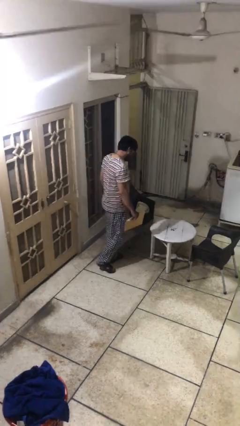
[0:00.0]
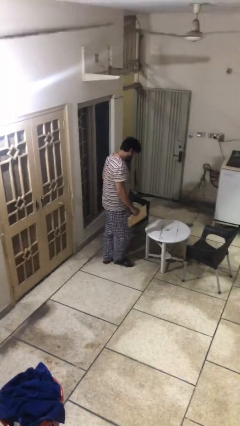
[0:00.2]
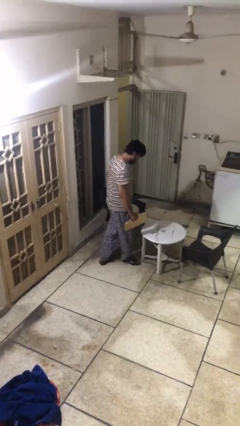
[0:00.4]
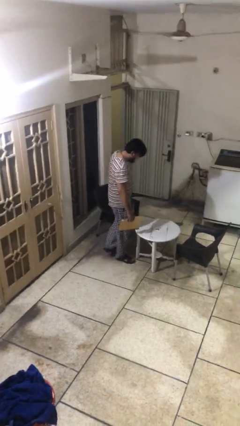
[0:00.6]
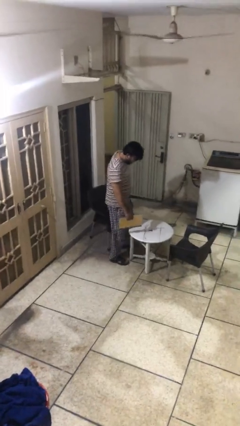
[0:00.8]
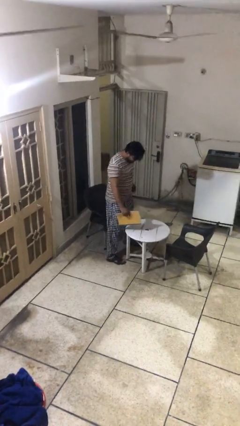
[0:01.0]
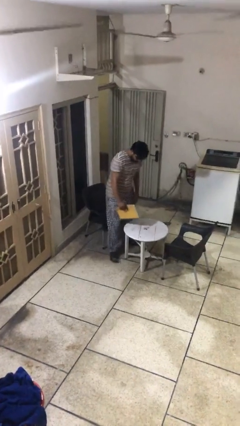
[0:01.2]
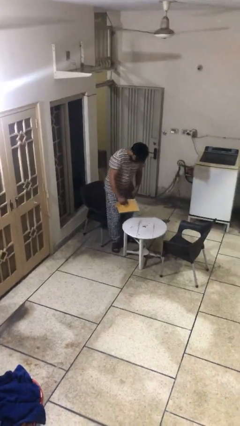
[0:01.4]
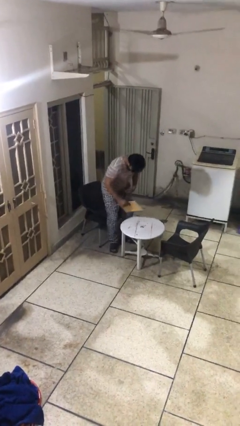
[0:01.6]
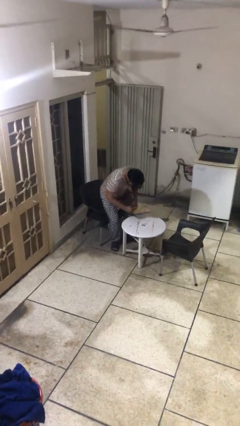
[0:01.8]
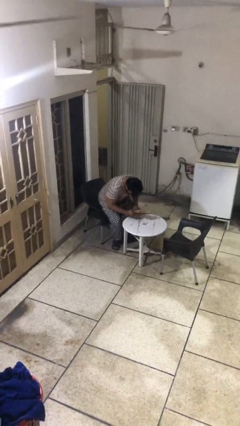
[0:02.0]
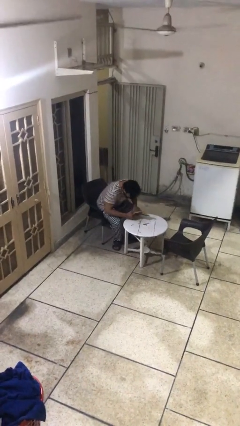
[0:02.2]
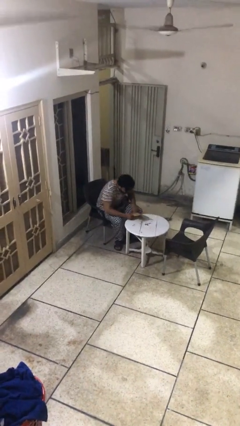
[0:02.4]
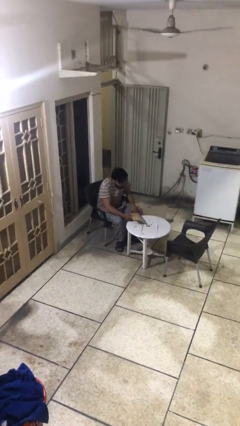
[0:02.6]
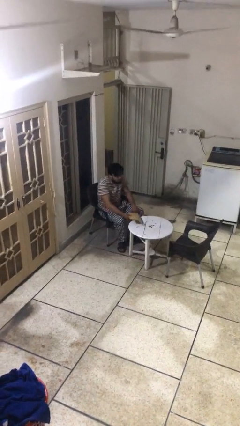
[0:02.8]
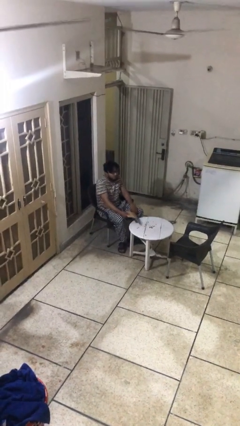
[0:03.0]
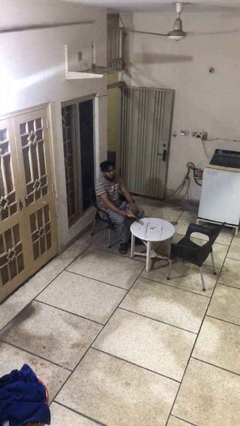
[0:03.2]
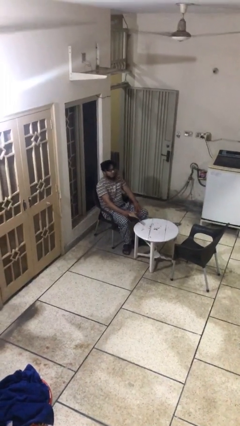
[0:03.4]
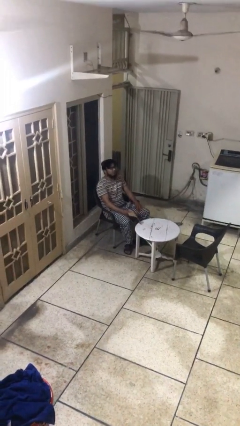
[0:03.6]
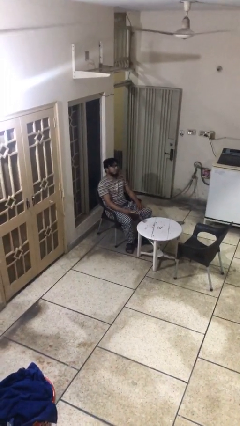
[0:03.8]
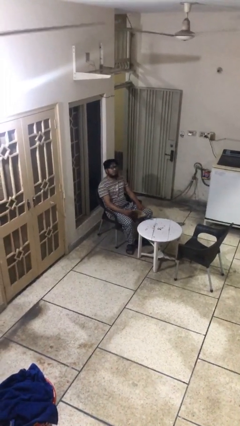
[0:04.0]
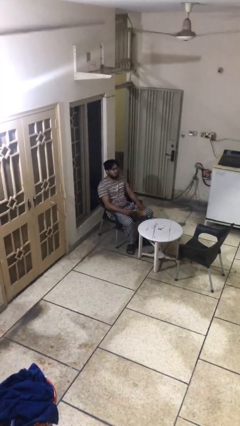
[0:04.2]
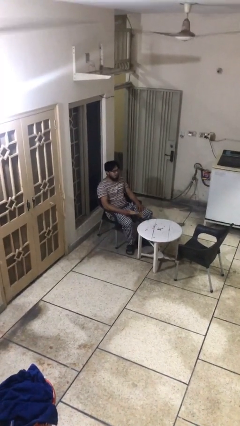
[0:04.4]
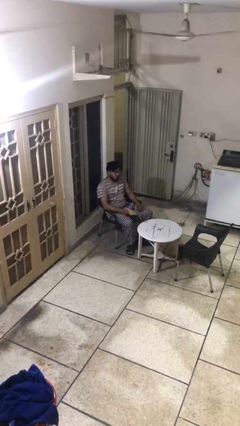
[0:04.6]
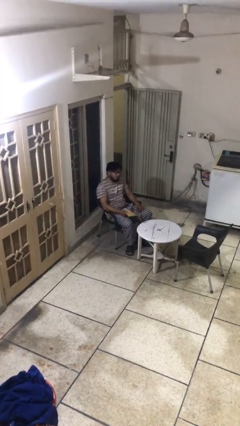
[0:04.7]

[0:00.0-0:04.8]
person sits down

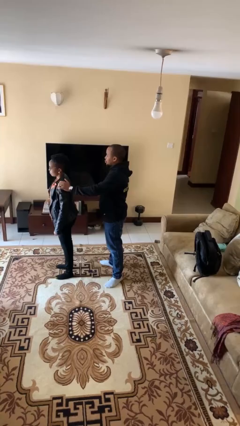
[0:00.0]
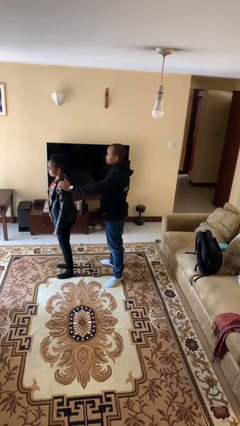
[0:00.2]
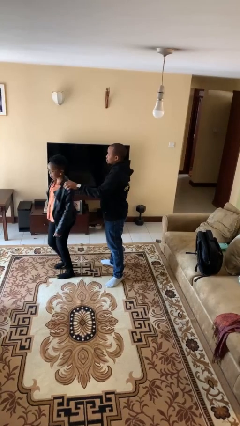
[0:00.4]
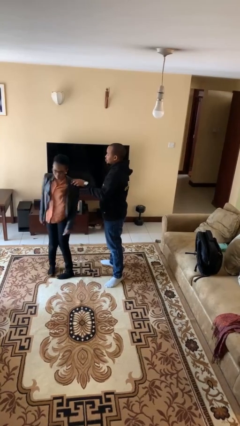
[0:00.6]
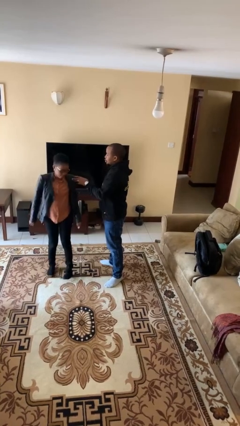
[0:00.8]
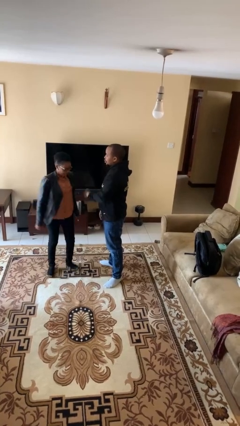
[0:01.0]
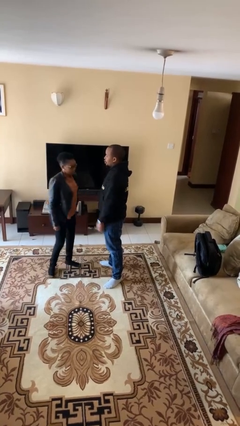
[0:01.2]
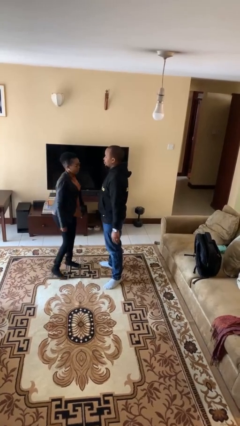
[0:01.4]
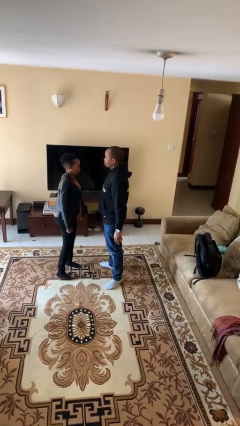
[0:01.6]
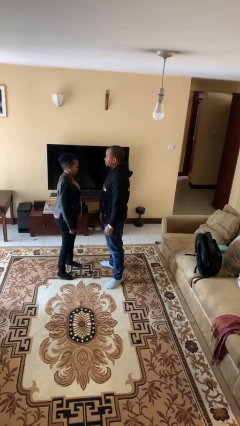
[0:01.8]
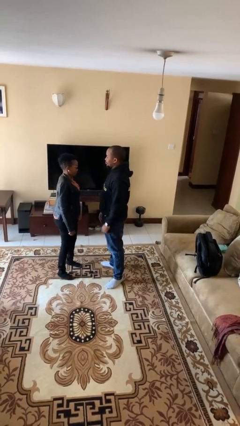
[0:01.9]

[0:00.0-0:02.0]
person spins person around

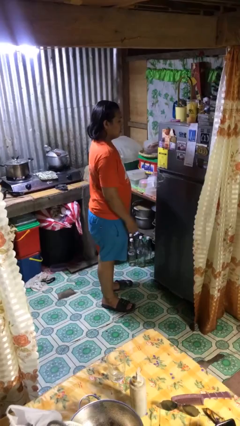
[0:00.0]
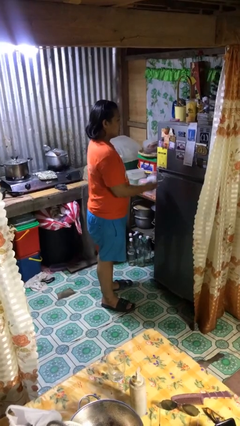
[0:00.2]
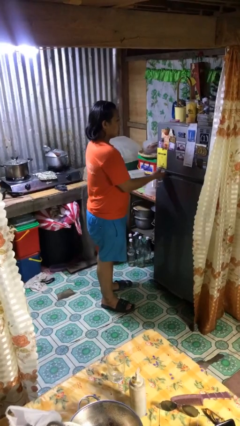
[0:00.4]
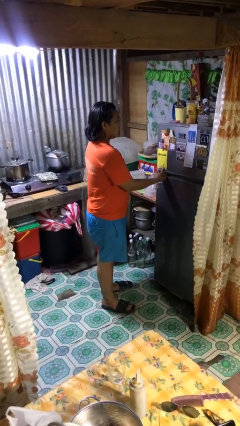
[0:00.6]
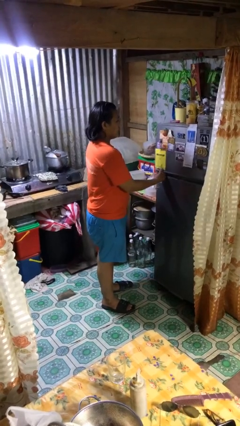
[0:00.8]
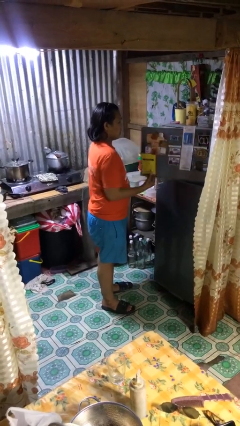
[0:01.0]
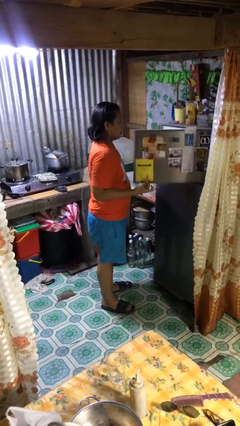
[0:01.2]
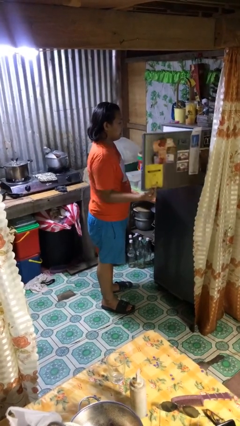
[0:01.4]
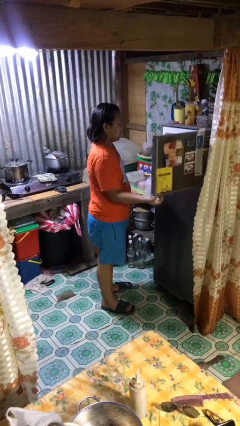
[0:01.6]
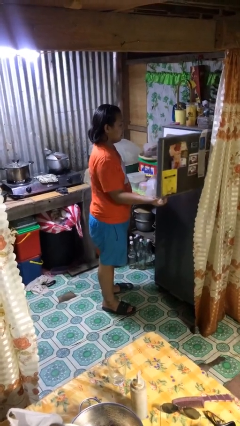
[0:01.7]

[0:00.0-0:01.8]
person opens refrigerator

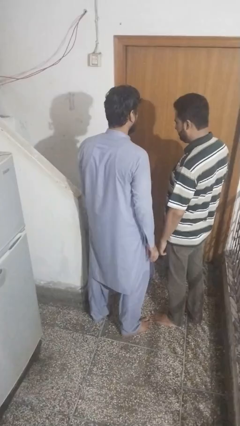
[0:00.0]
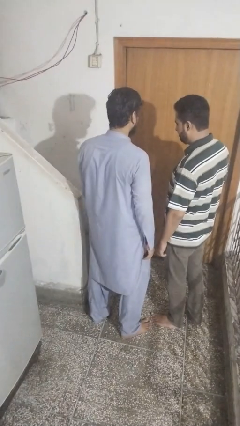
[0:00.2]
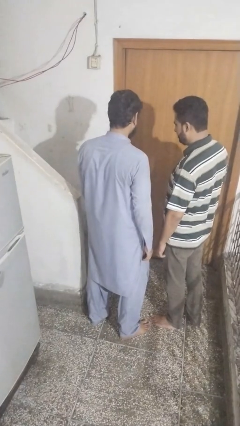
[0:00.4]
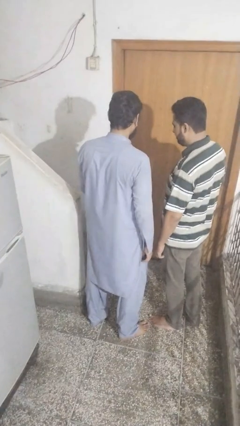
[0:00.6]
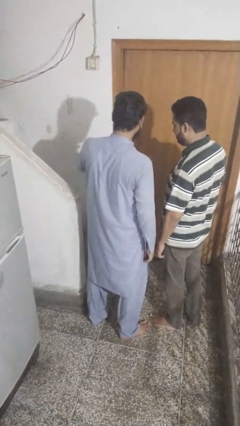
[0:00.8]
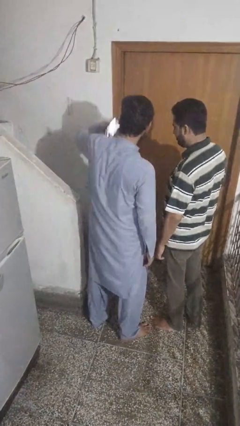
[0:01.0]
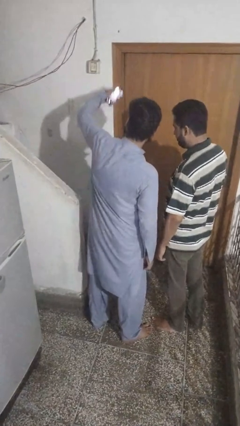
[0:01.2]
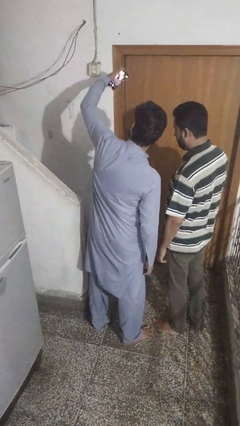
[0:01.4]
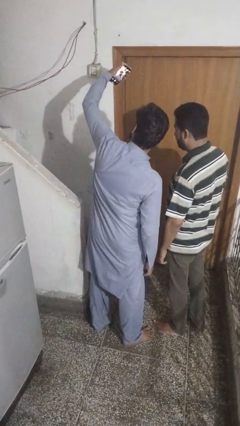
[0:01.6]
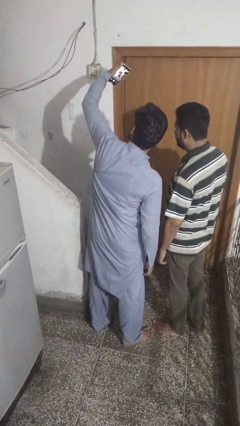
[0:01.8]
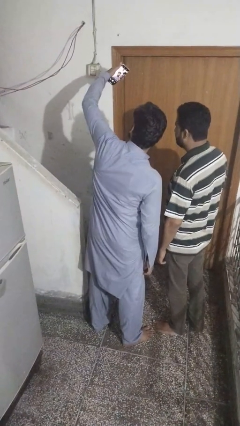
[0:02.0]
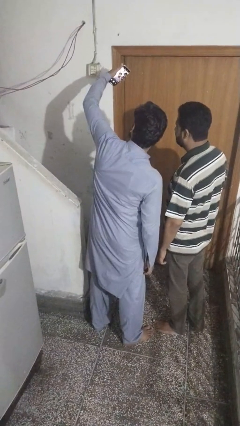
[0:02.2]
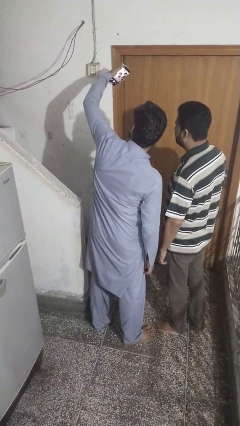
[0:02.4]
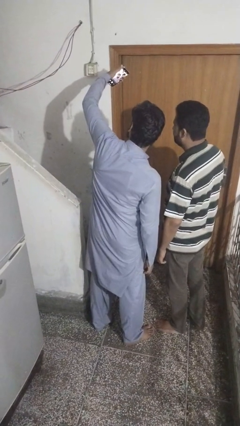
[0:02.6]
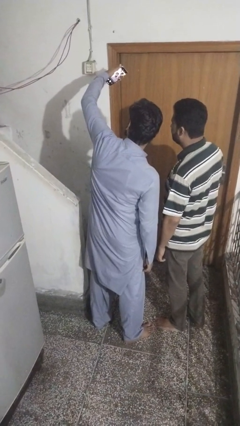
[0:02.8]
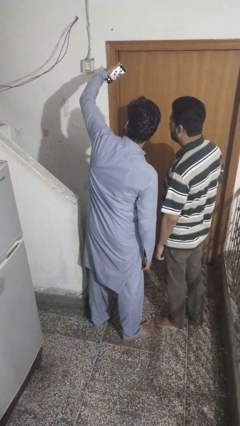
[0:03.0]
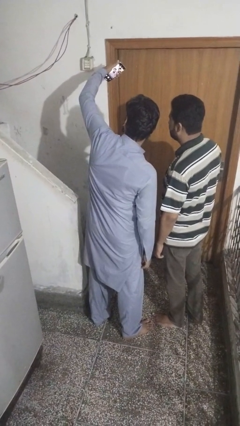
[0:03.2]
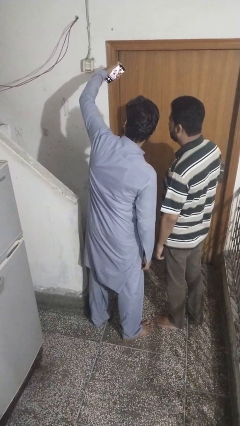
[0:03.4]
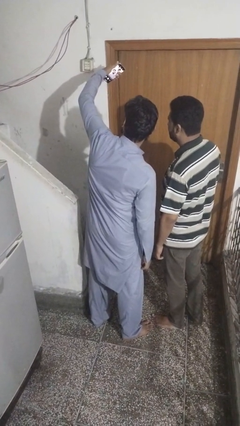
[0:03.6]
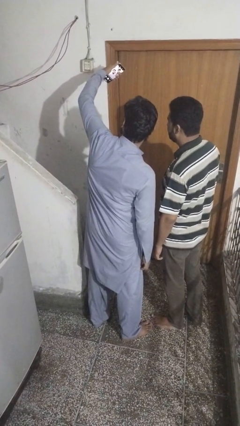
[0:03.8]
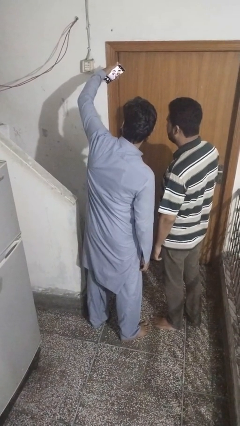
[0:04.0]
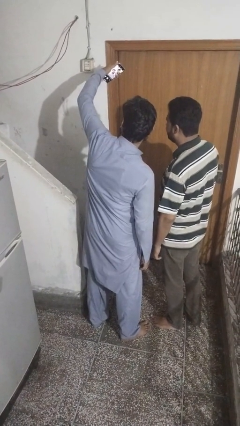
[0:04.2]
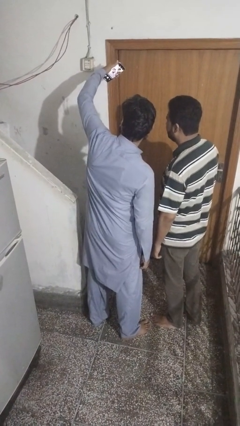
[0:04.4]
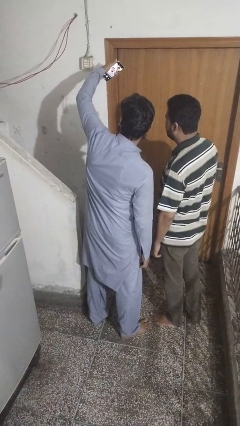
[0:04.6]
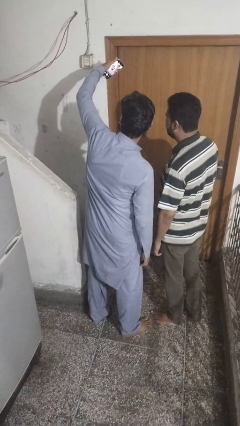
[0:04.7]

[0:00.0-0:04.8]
person takes selfie with person

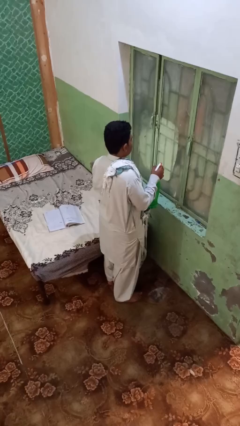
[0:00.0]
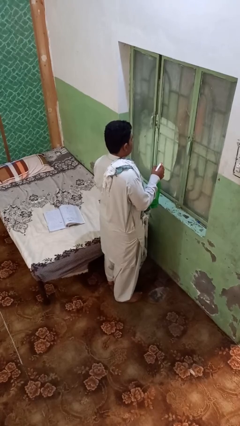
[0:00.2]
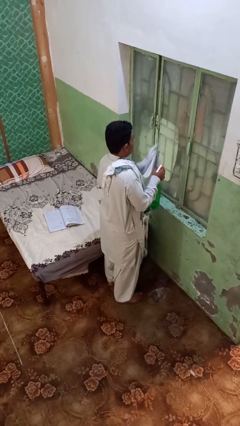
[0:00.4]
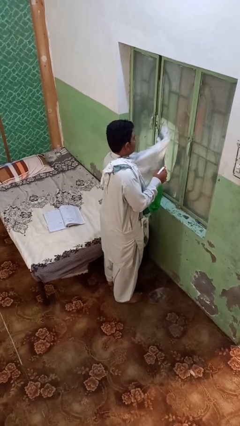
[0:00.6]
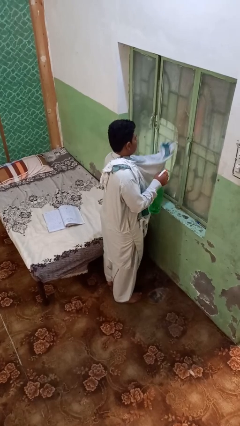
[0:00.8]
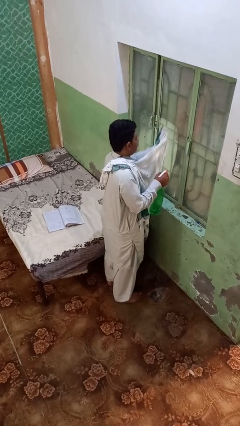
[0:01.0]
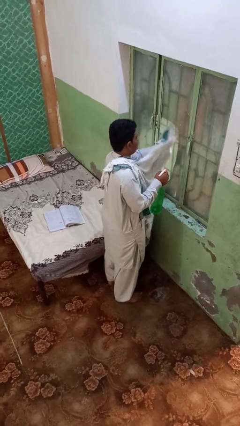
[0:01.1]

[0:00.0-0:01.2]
person washes window

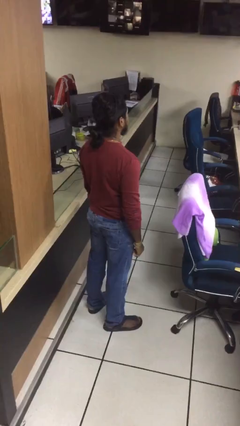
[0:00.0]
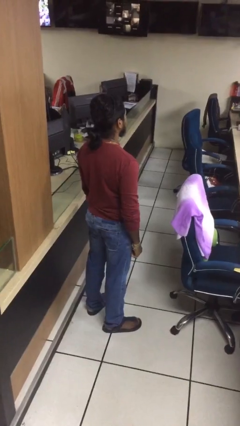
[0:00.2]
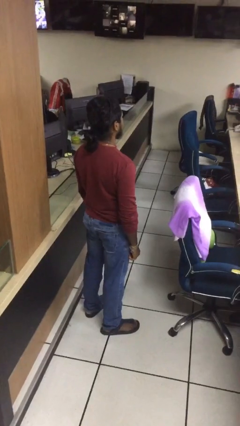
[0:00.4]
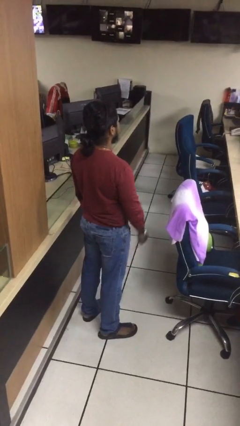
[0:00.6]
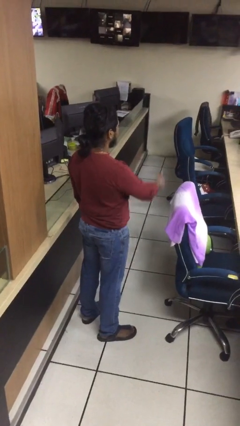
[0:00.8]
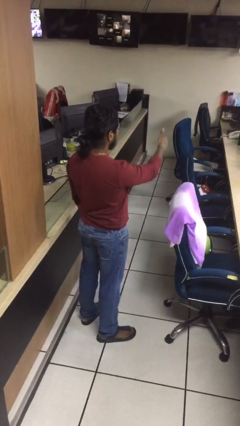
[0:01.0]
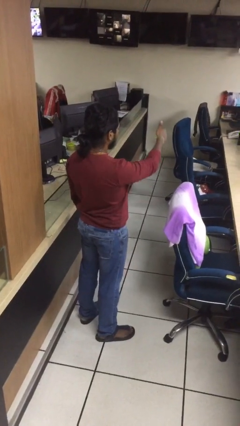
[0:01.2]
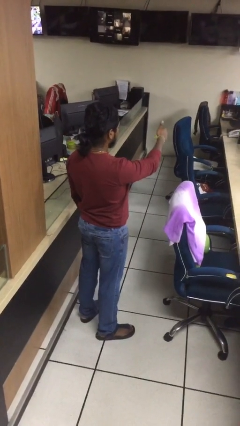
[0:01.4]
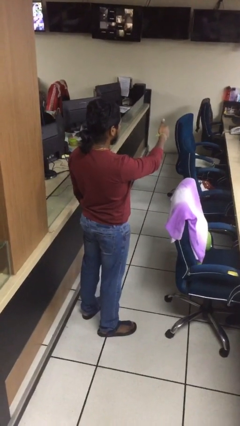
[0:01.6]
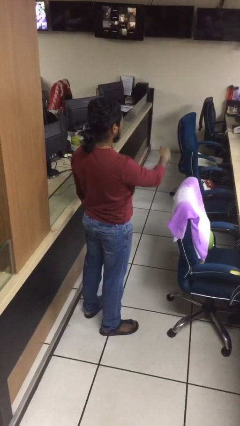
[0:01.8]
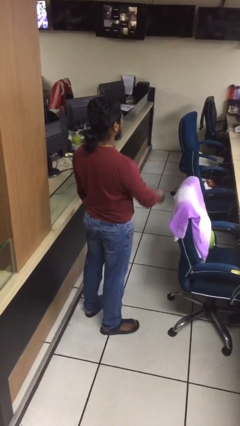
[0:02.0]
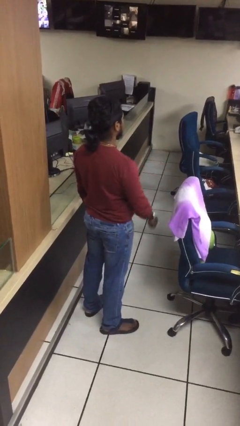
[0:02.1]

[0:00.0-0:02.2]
person gestures thumbs up

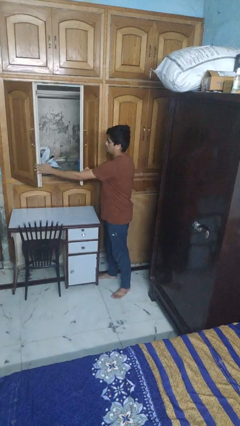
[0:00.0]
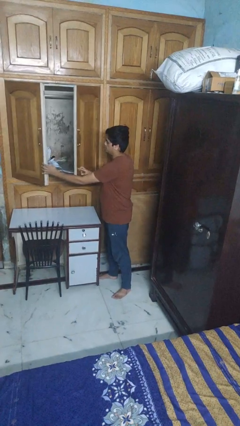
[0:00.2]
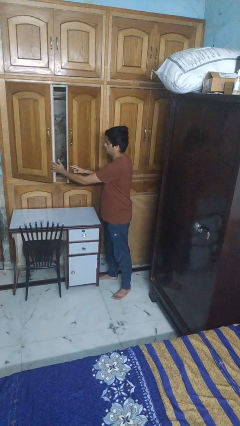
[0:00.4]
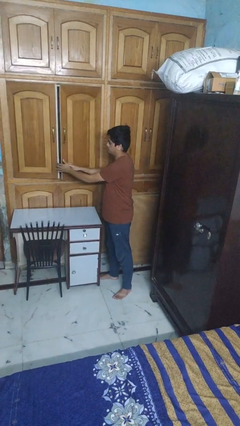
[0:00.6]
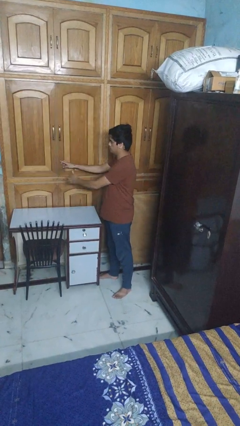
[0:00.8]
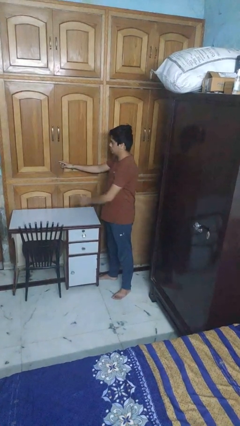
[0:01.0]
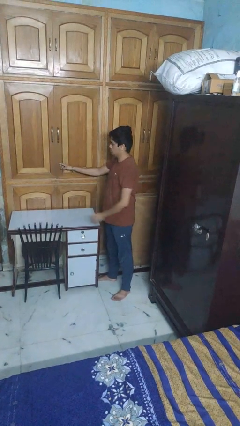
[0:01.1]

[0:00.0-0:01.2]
person closes closet door
